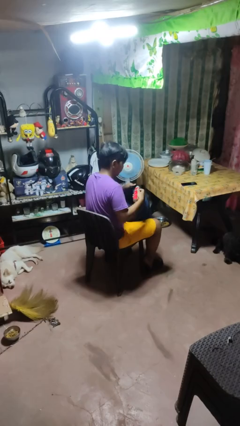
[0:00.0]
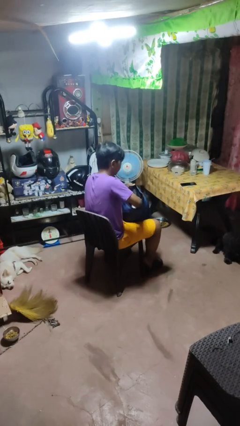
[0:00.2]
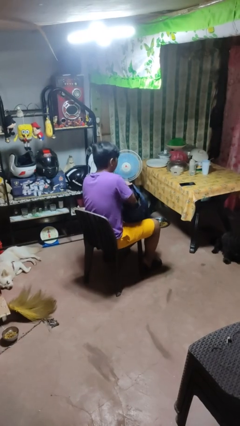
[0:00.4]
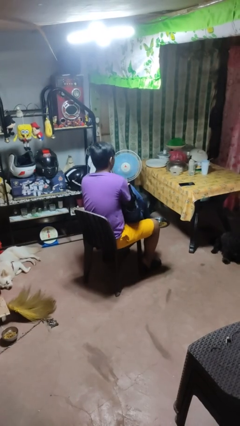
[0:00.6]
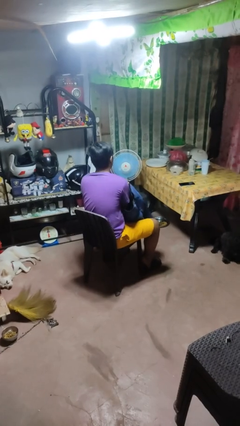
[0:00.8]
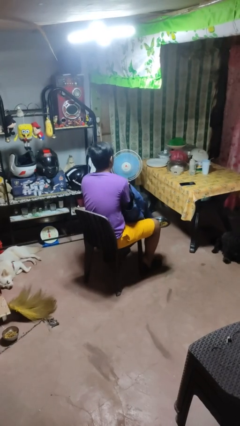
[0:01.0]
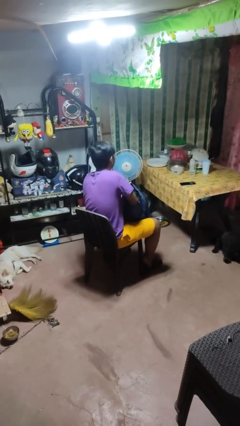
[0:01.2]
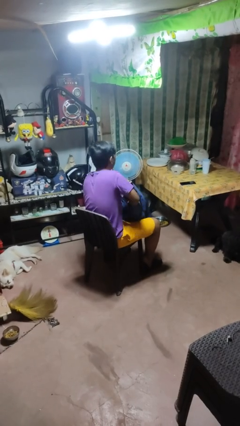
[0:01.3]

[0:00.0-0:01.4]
person puts object into backpack

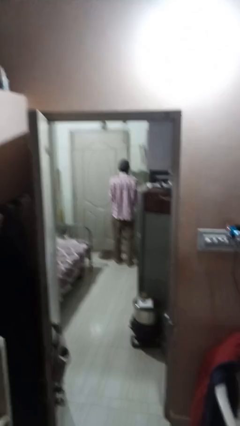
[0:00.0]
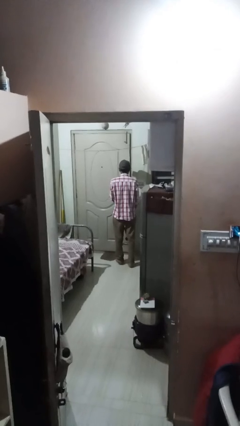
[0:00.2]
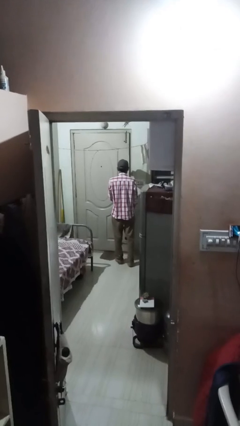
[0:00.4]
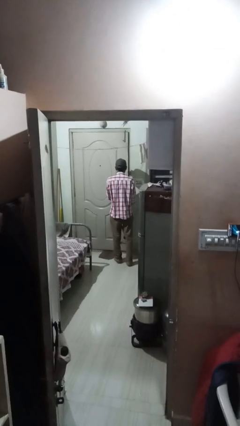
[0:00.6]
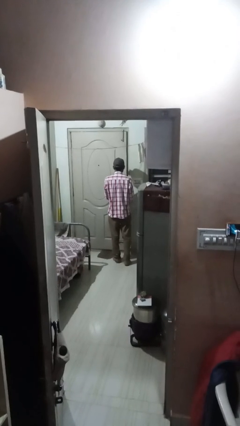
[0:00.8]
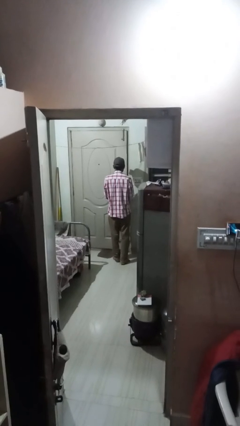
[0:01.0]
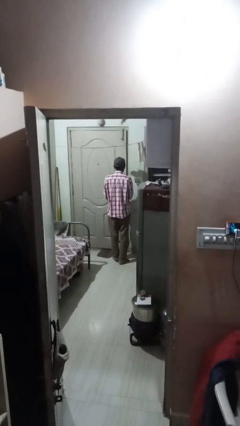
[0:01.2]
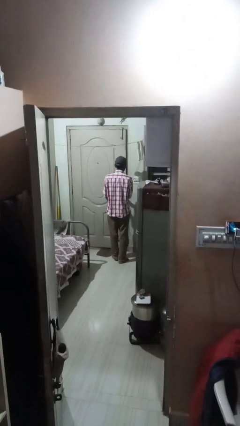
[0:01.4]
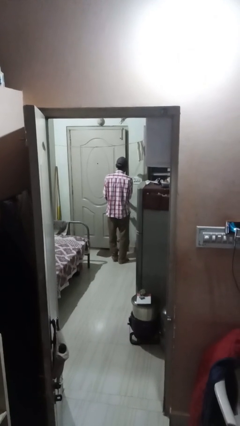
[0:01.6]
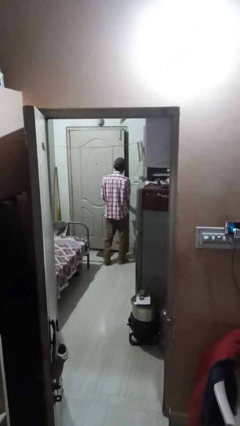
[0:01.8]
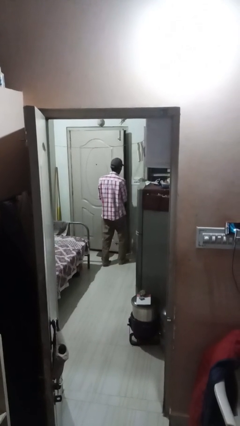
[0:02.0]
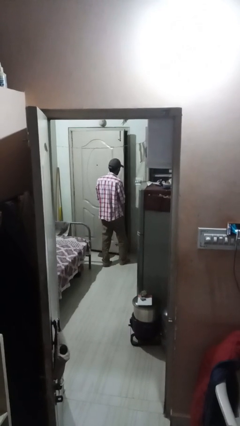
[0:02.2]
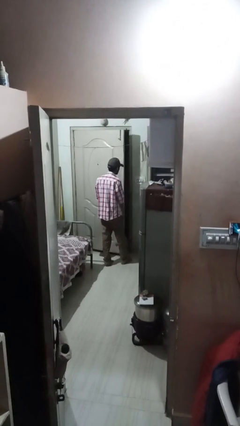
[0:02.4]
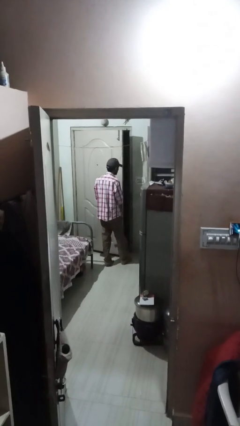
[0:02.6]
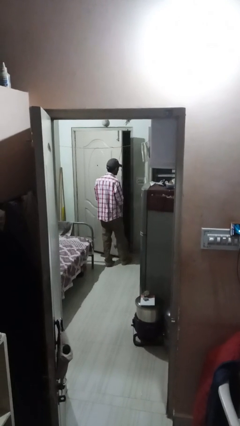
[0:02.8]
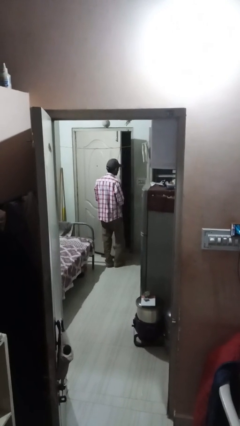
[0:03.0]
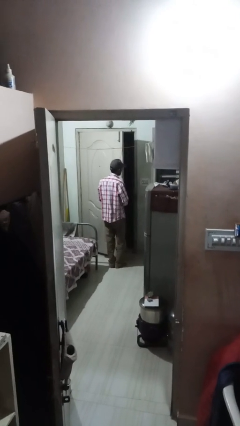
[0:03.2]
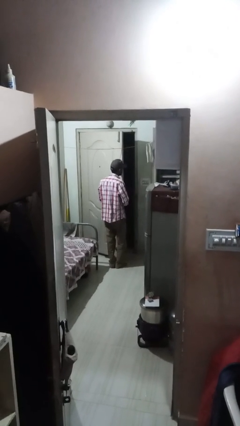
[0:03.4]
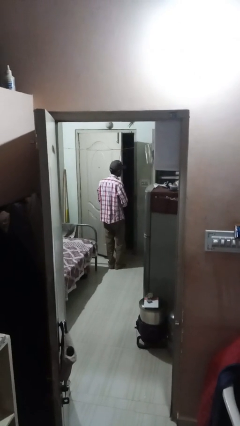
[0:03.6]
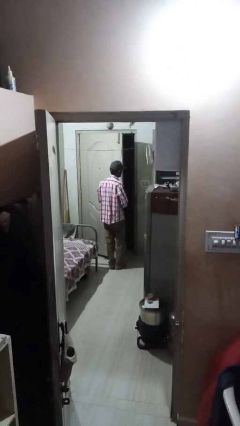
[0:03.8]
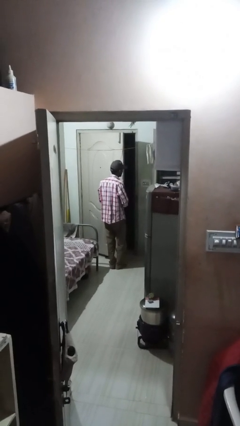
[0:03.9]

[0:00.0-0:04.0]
person opens facility door

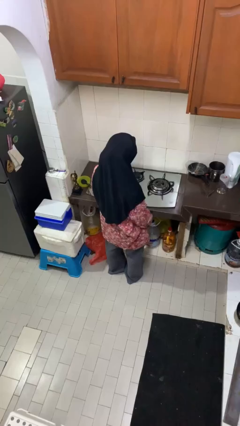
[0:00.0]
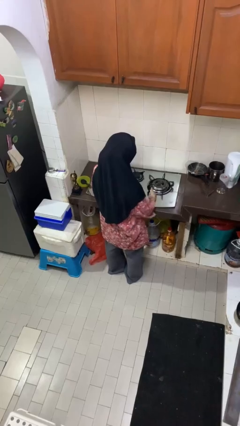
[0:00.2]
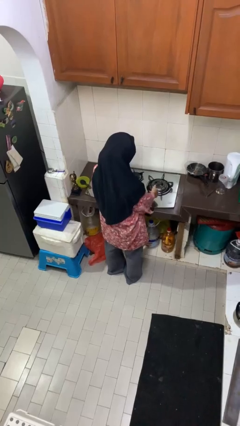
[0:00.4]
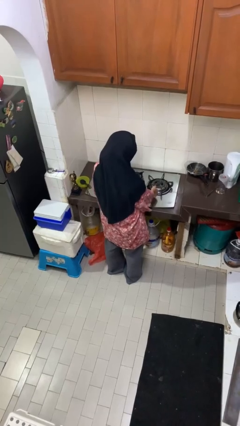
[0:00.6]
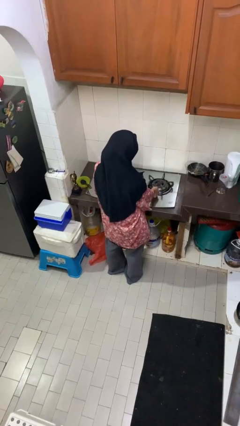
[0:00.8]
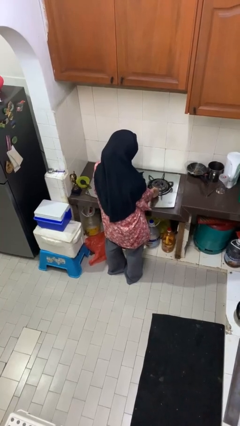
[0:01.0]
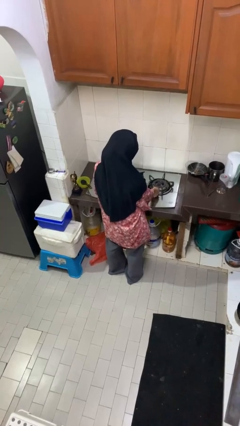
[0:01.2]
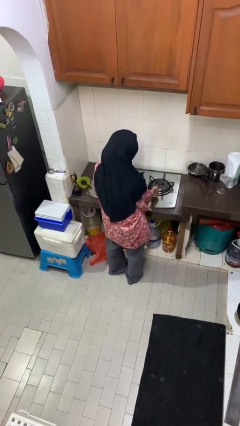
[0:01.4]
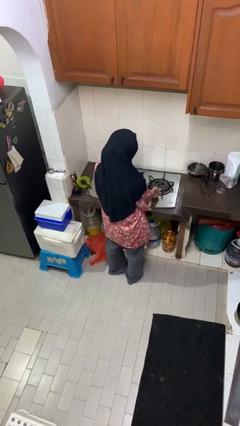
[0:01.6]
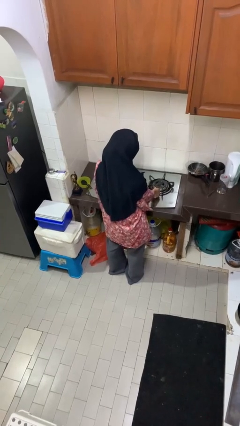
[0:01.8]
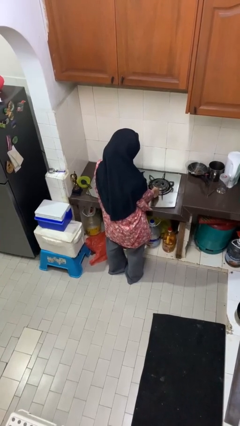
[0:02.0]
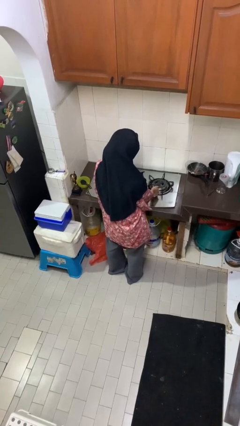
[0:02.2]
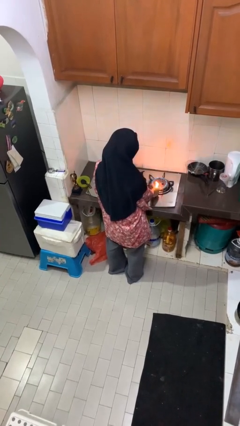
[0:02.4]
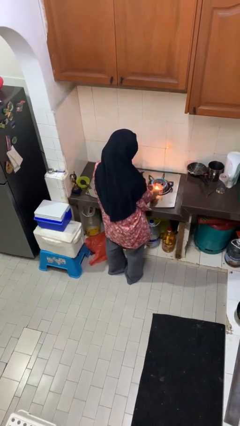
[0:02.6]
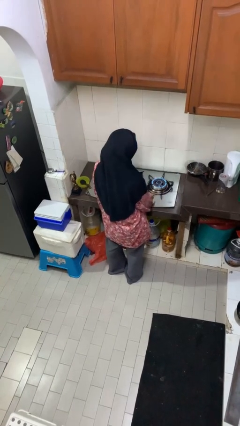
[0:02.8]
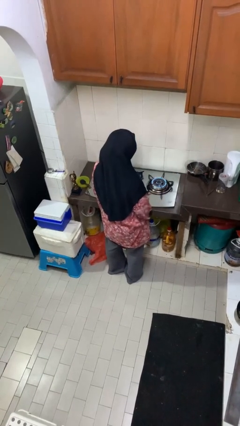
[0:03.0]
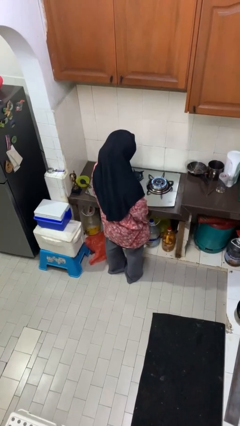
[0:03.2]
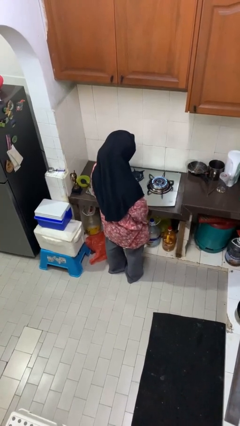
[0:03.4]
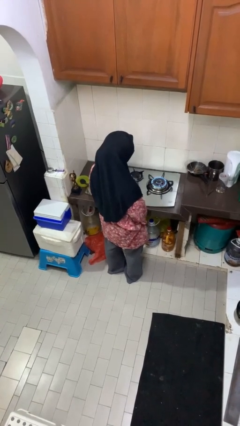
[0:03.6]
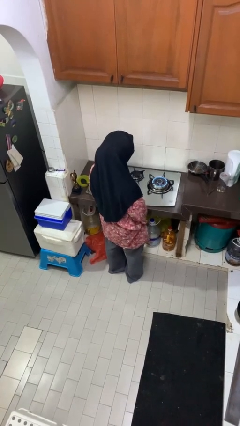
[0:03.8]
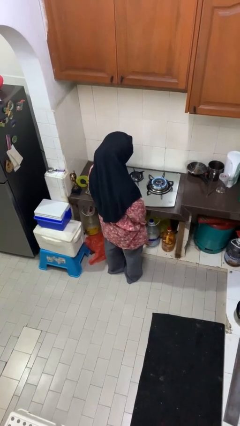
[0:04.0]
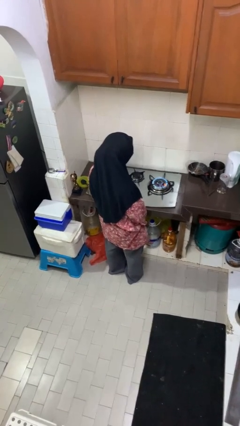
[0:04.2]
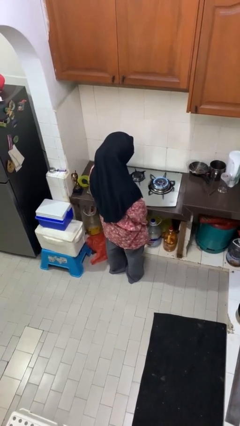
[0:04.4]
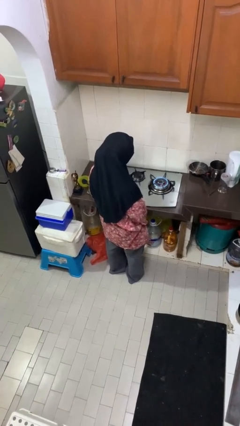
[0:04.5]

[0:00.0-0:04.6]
person turns on stovetop

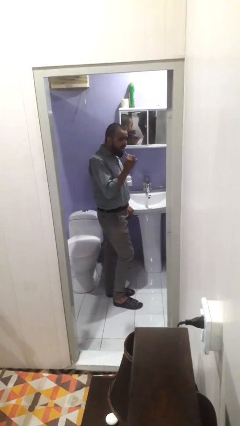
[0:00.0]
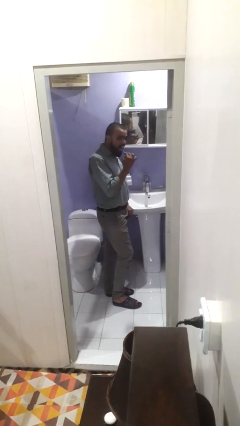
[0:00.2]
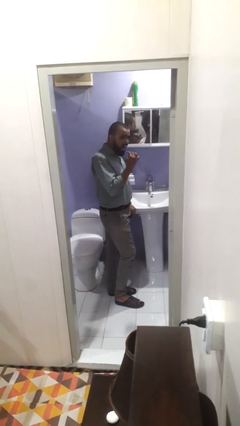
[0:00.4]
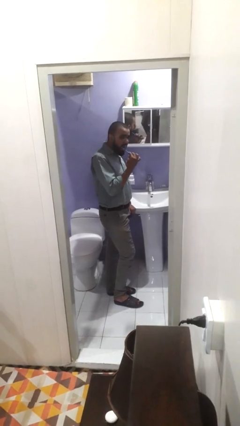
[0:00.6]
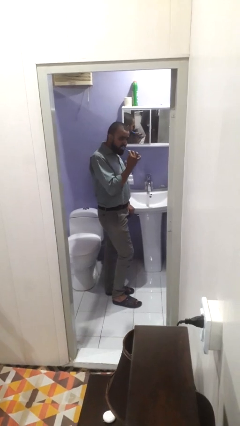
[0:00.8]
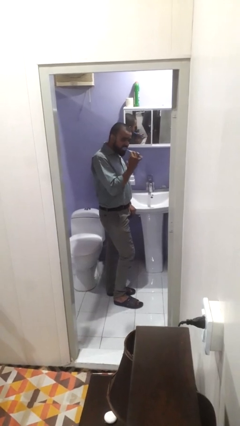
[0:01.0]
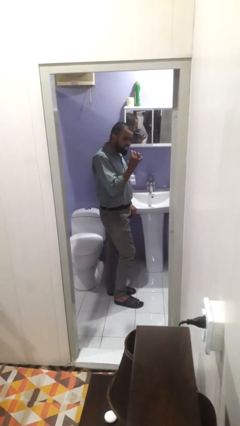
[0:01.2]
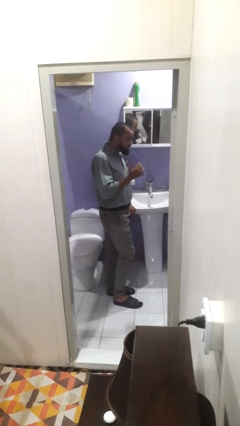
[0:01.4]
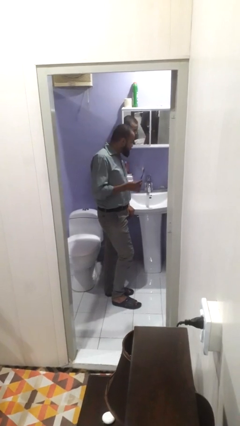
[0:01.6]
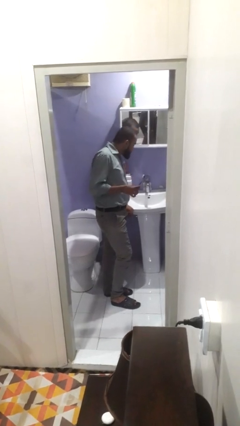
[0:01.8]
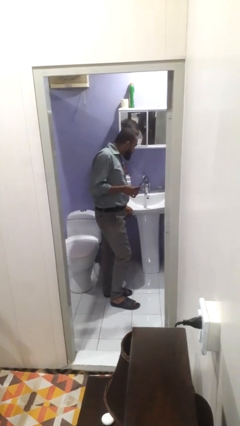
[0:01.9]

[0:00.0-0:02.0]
person brushes teeth

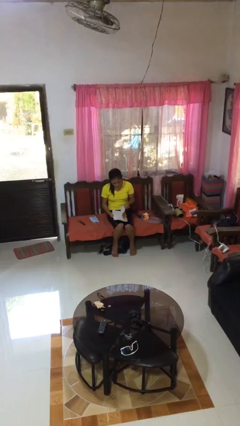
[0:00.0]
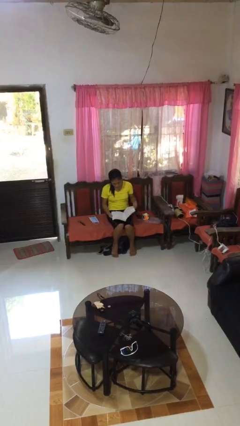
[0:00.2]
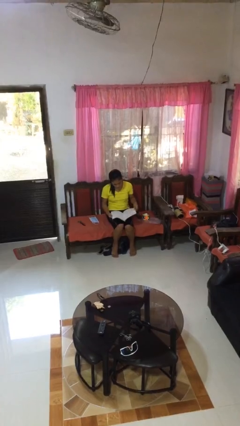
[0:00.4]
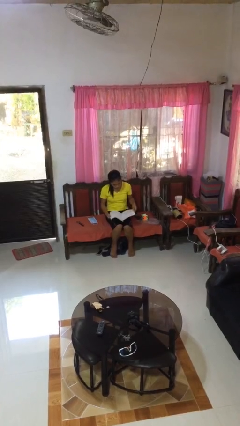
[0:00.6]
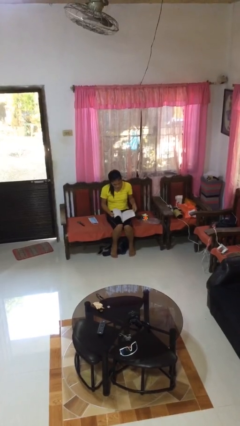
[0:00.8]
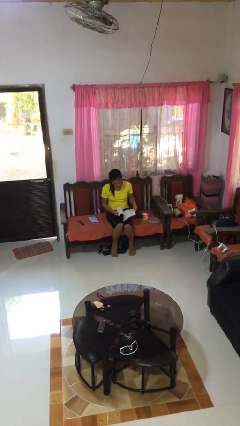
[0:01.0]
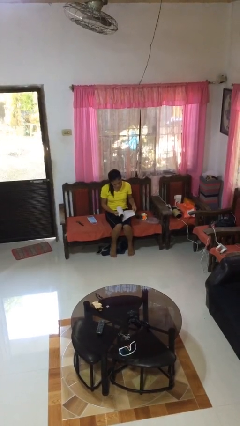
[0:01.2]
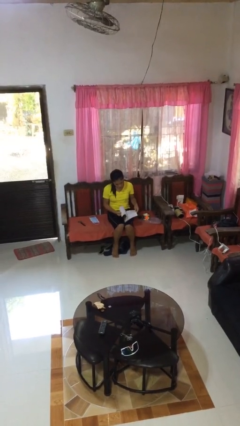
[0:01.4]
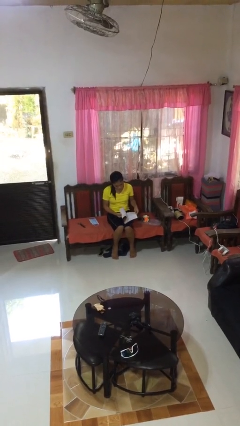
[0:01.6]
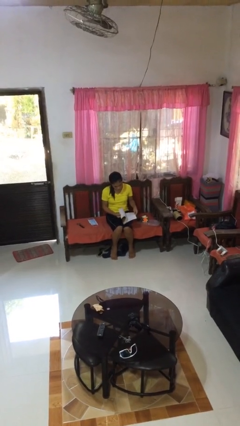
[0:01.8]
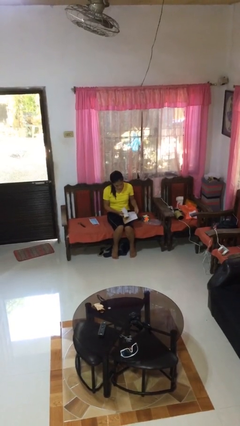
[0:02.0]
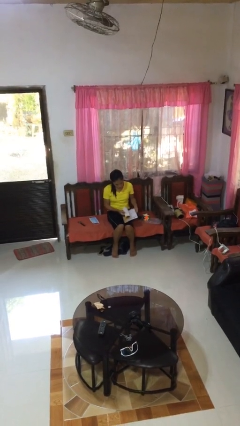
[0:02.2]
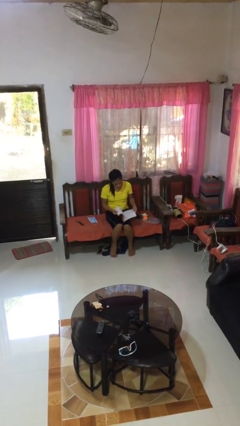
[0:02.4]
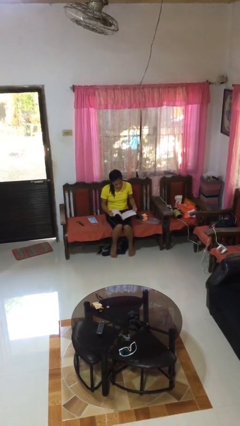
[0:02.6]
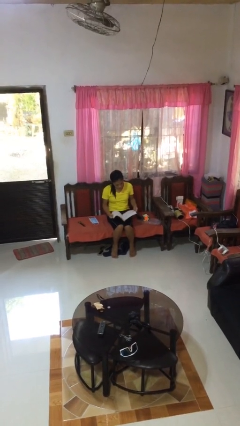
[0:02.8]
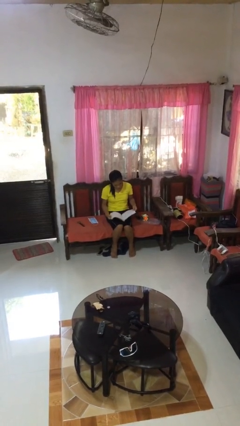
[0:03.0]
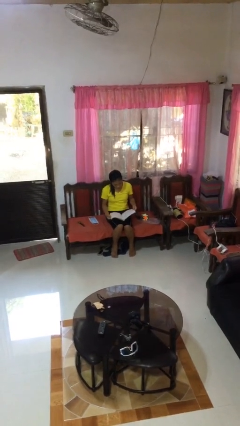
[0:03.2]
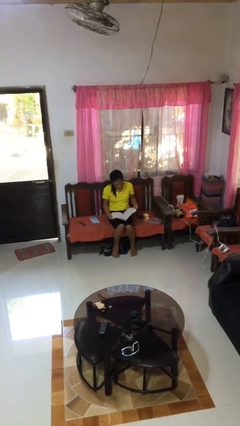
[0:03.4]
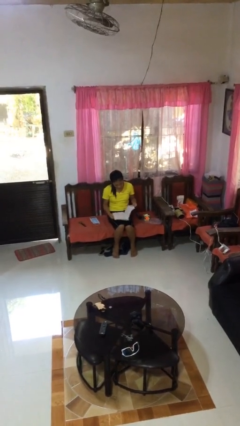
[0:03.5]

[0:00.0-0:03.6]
person reads book

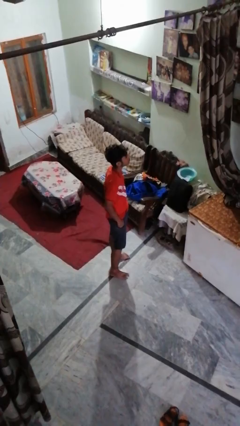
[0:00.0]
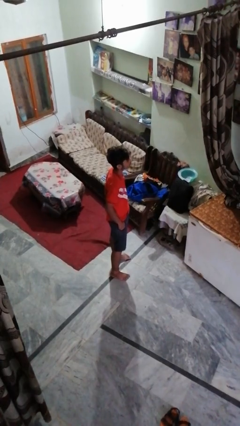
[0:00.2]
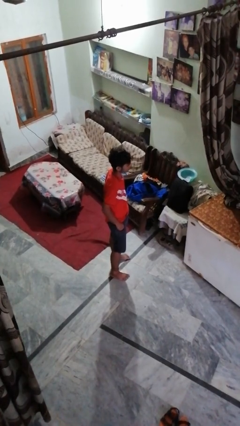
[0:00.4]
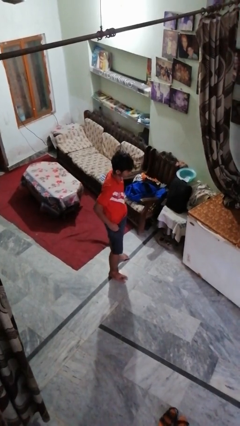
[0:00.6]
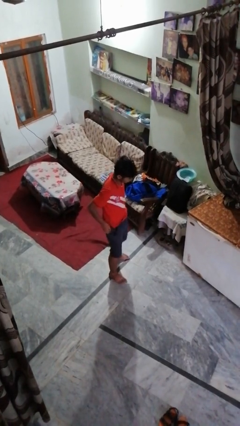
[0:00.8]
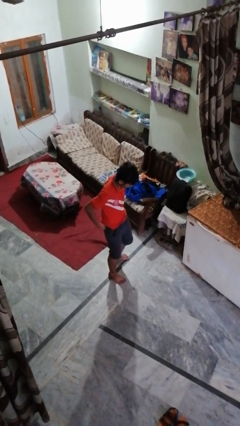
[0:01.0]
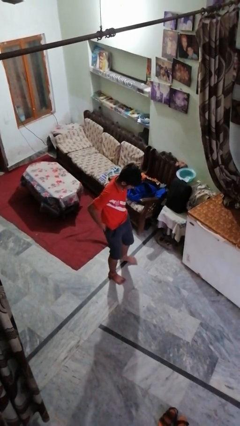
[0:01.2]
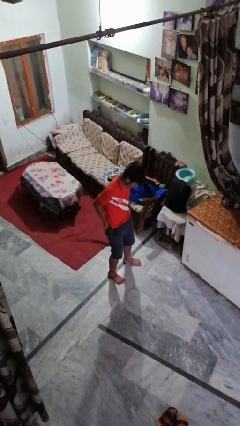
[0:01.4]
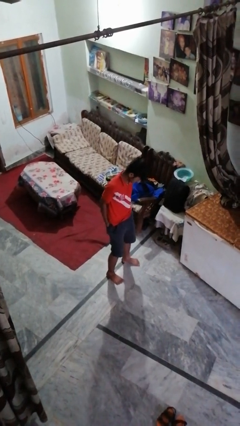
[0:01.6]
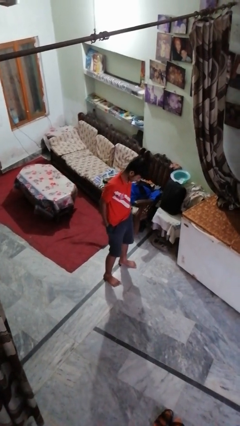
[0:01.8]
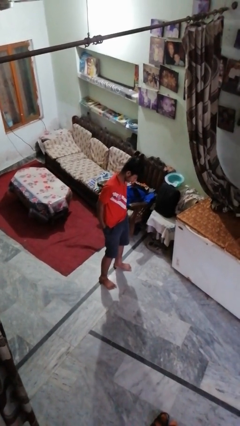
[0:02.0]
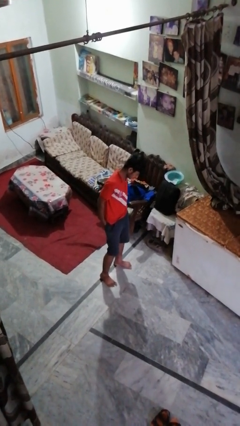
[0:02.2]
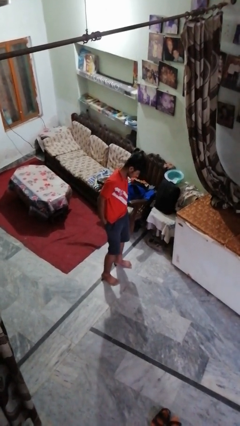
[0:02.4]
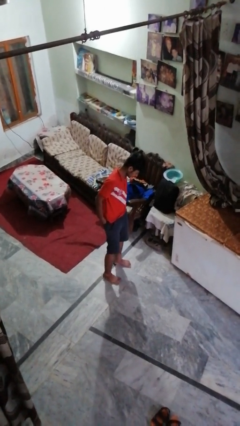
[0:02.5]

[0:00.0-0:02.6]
person puts hands in back pockets
